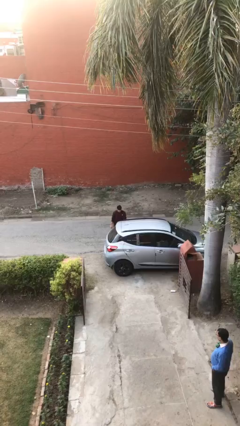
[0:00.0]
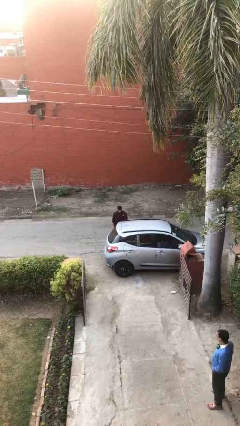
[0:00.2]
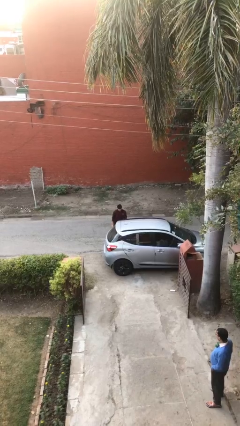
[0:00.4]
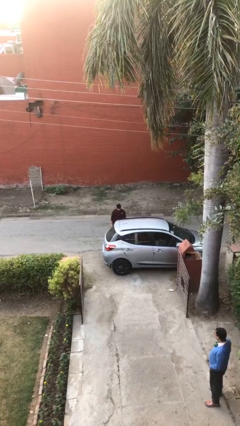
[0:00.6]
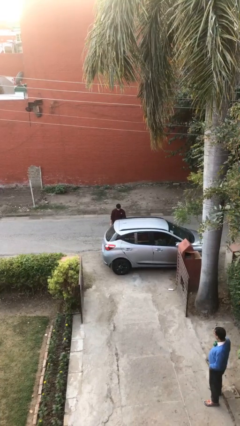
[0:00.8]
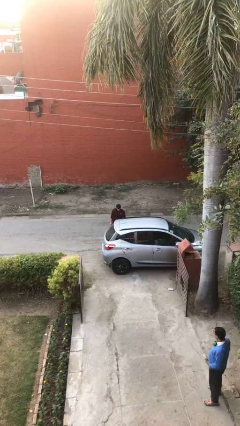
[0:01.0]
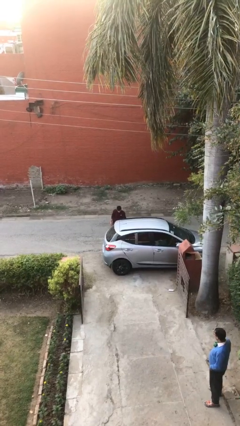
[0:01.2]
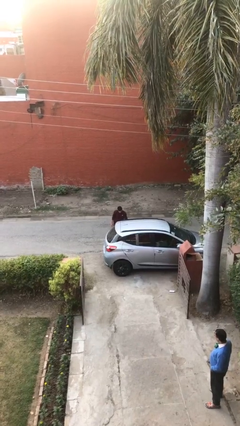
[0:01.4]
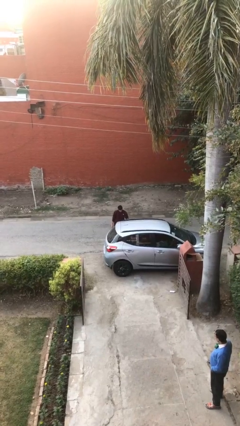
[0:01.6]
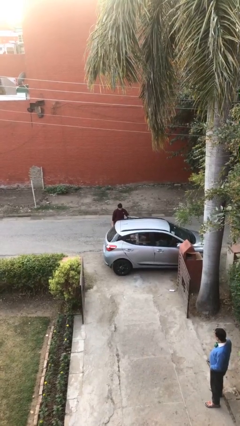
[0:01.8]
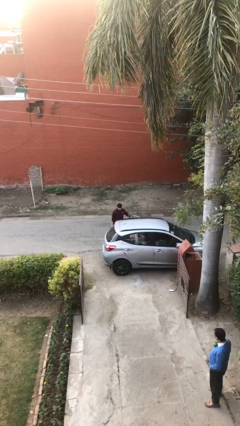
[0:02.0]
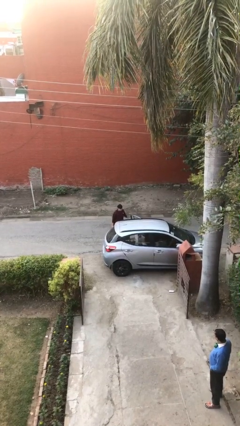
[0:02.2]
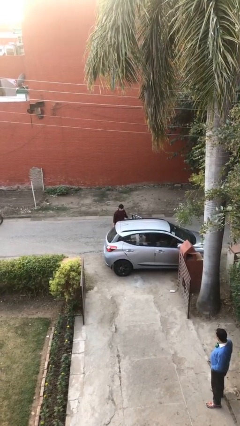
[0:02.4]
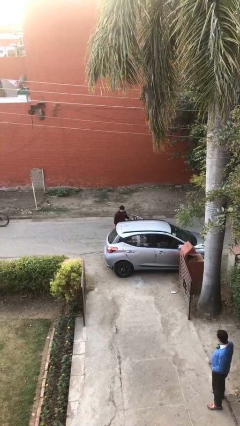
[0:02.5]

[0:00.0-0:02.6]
person opens car door

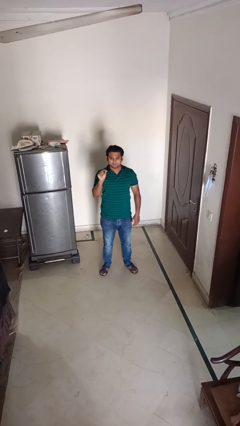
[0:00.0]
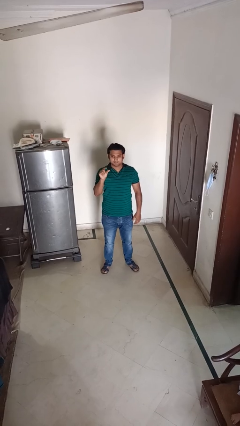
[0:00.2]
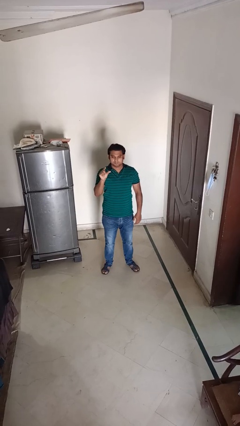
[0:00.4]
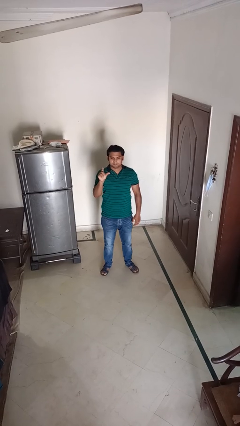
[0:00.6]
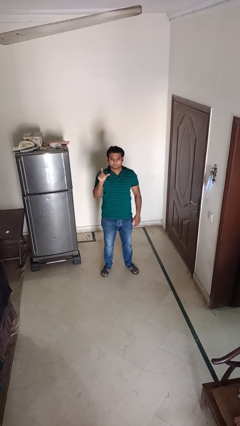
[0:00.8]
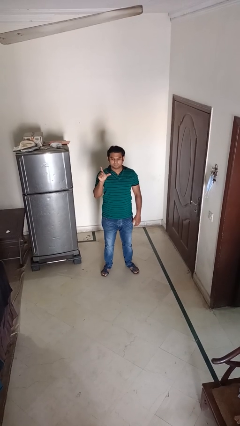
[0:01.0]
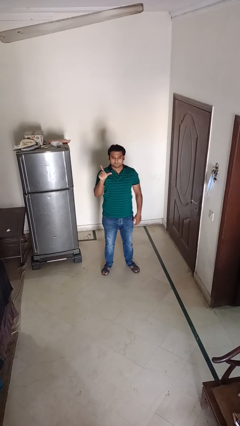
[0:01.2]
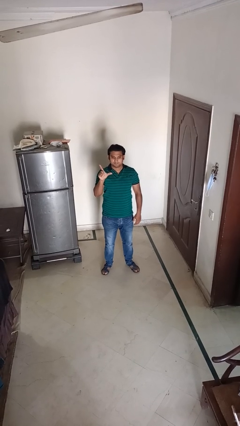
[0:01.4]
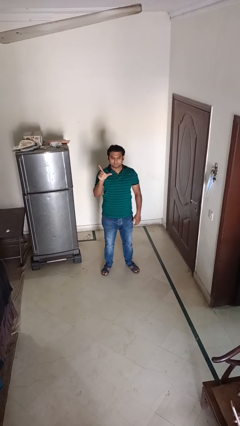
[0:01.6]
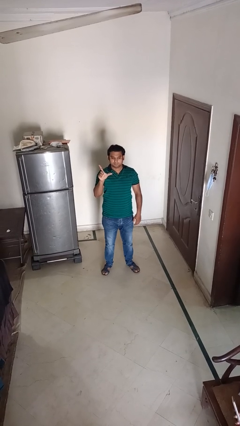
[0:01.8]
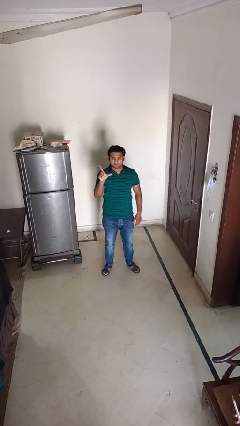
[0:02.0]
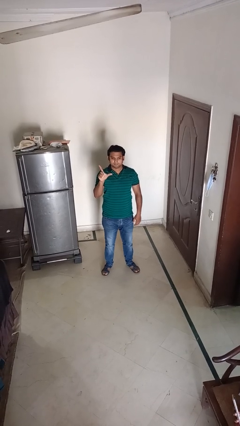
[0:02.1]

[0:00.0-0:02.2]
person gestures zoom out

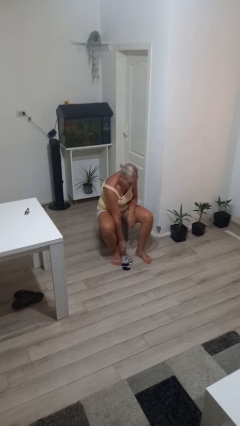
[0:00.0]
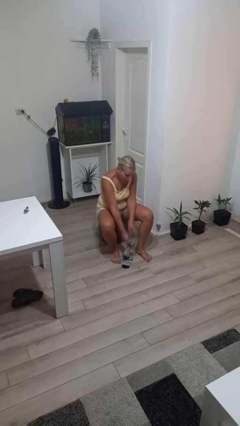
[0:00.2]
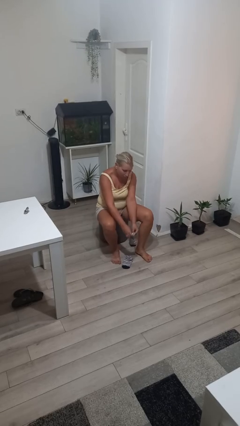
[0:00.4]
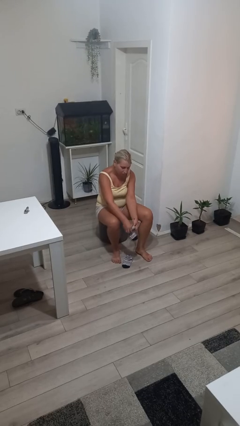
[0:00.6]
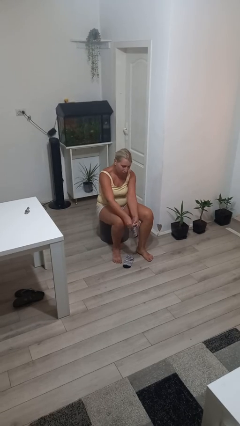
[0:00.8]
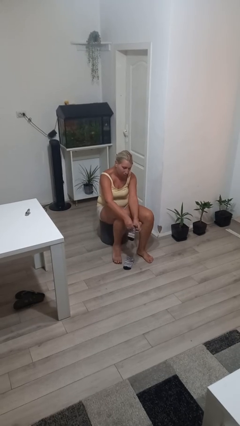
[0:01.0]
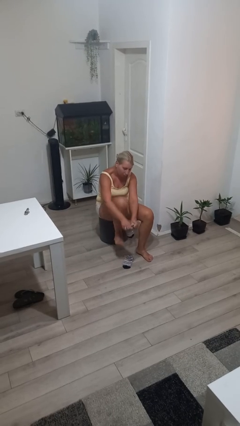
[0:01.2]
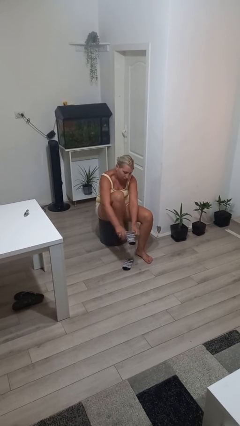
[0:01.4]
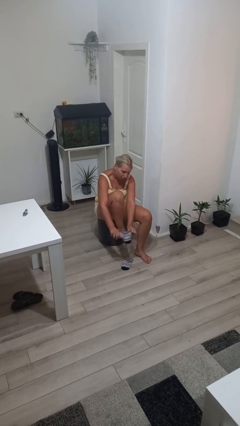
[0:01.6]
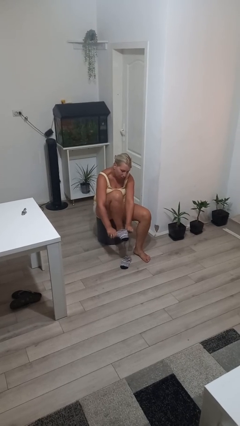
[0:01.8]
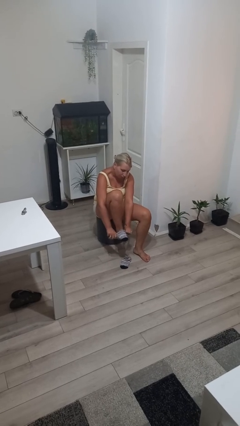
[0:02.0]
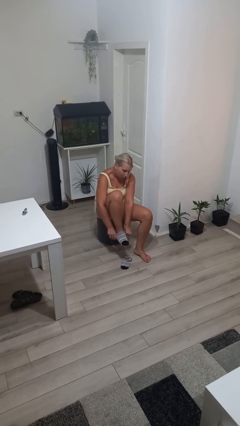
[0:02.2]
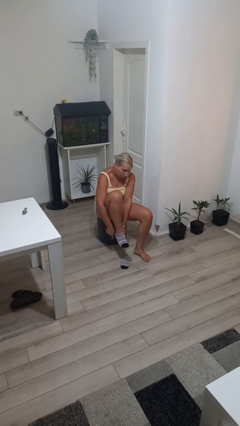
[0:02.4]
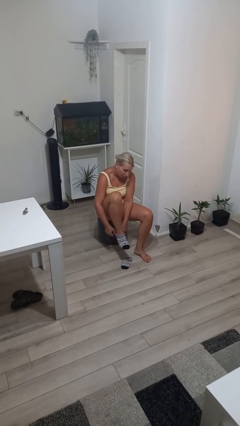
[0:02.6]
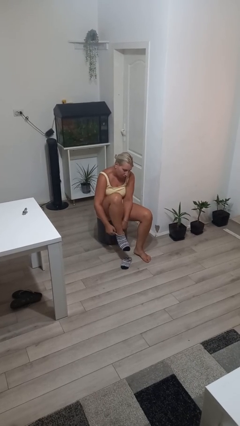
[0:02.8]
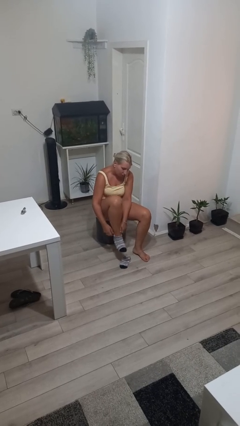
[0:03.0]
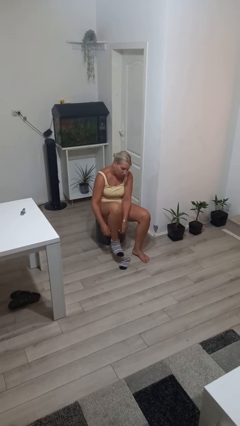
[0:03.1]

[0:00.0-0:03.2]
person puts on socks

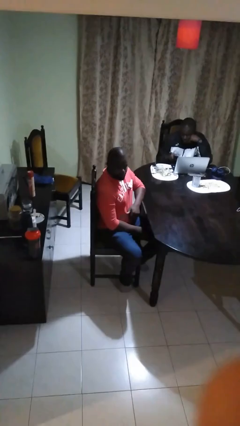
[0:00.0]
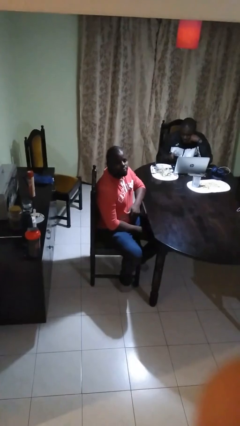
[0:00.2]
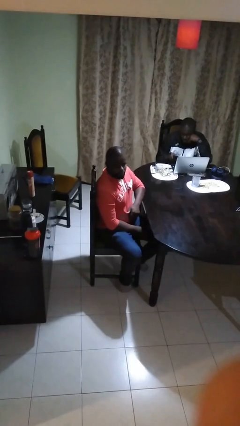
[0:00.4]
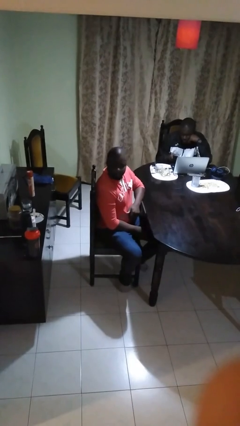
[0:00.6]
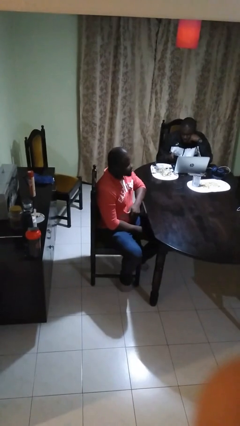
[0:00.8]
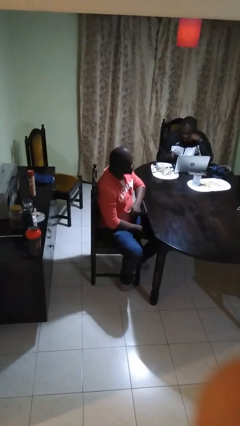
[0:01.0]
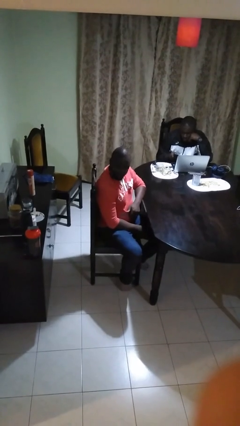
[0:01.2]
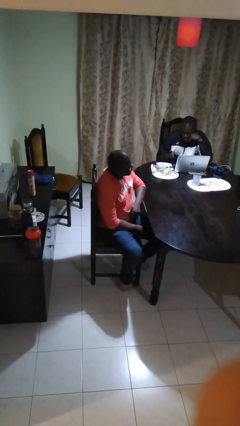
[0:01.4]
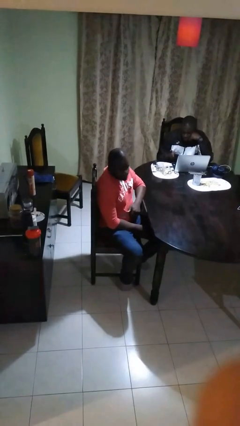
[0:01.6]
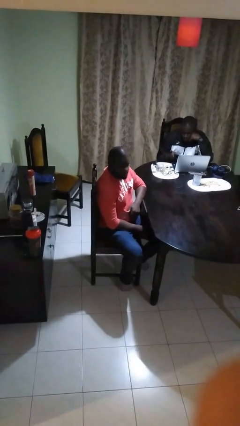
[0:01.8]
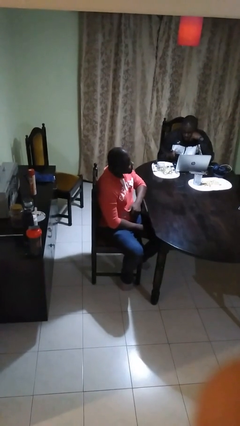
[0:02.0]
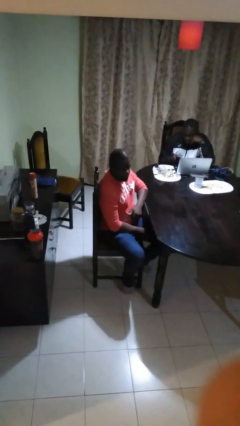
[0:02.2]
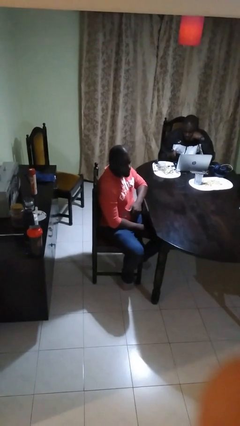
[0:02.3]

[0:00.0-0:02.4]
person shakes head

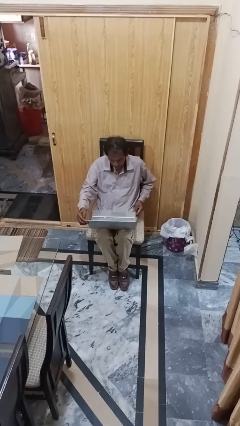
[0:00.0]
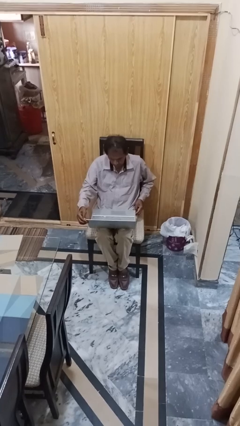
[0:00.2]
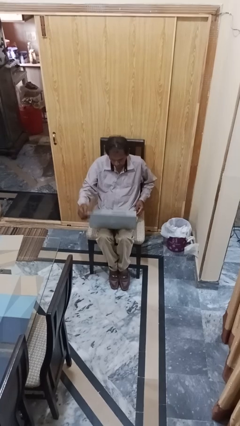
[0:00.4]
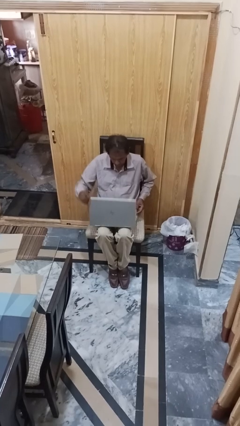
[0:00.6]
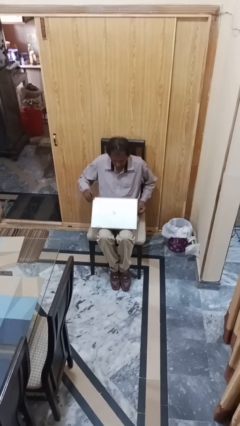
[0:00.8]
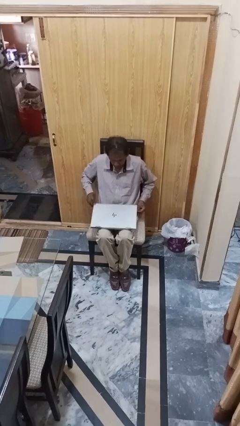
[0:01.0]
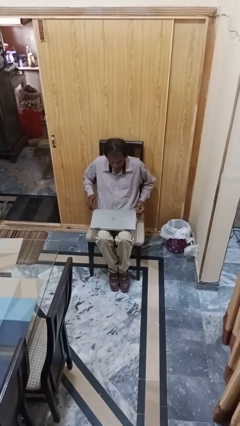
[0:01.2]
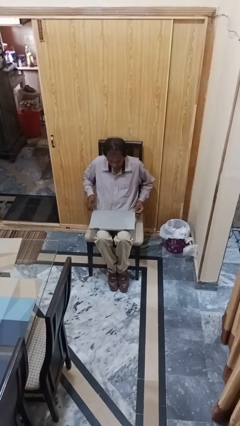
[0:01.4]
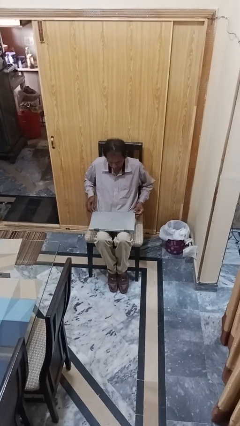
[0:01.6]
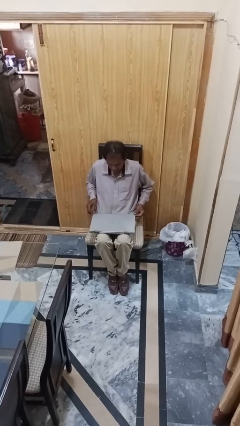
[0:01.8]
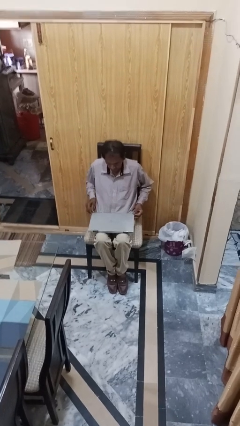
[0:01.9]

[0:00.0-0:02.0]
person closes laptop

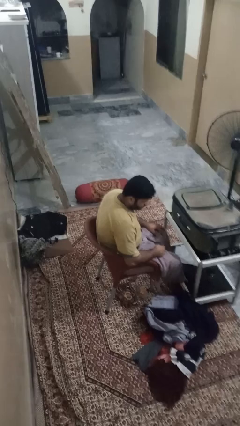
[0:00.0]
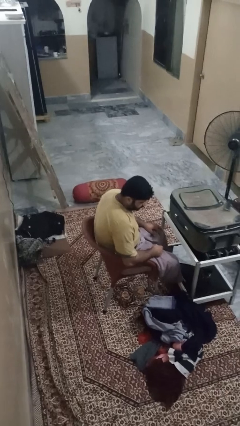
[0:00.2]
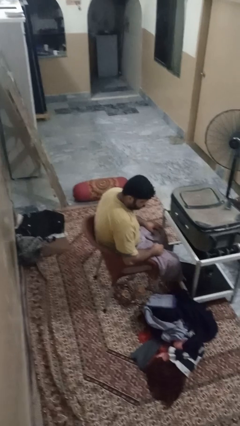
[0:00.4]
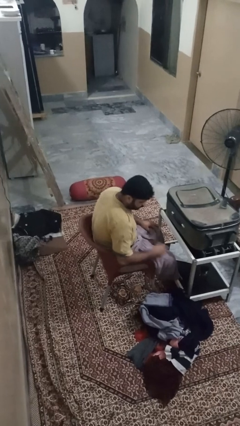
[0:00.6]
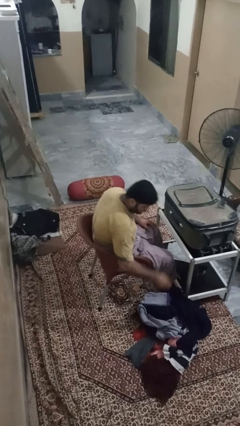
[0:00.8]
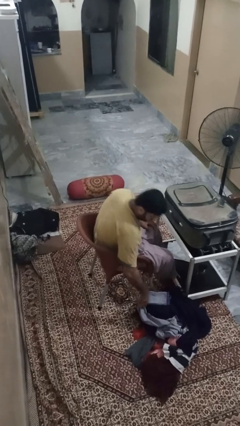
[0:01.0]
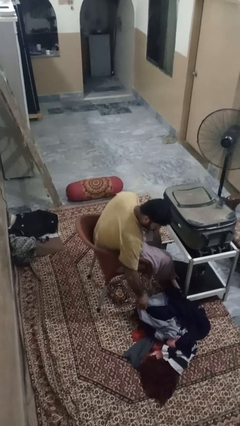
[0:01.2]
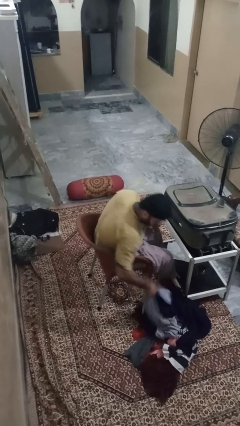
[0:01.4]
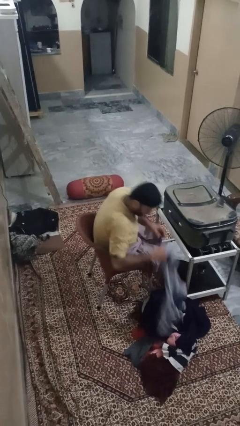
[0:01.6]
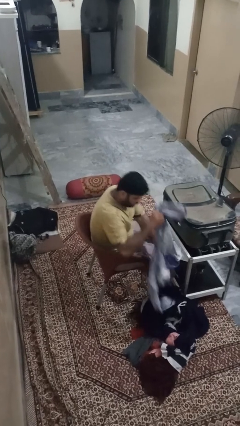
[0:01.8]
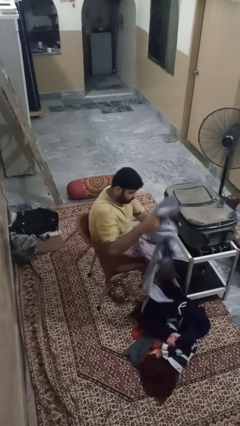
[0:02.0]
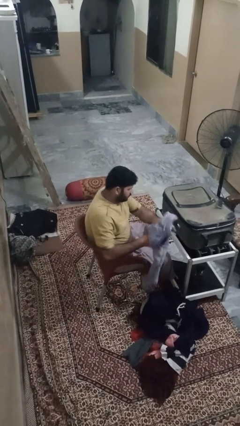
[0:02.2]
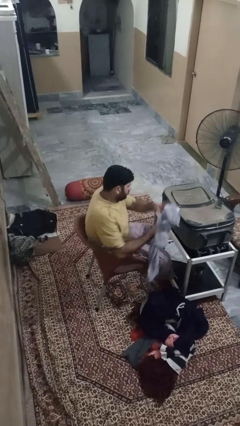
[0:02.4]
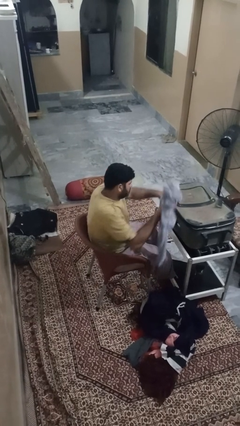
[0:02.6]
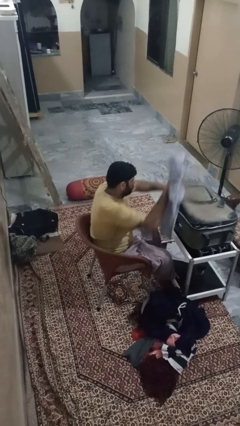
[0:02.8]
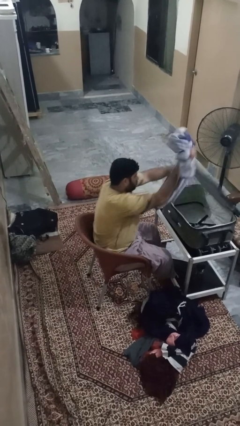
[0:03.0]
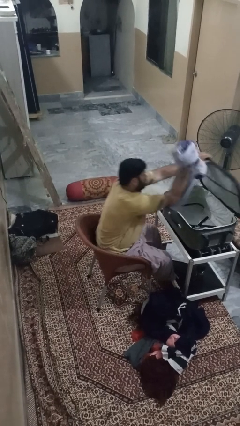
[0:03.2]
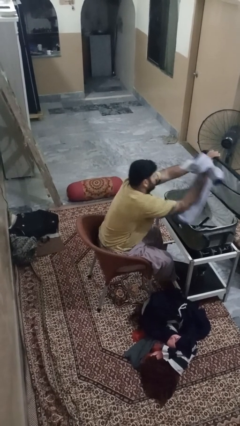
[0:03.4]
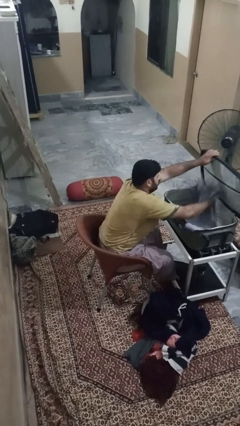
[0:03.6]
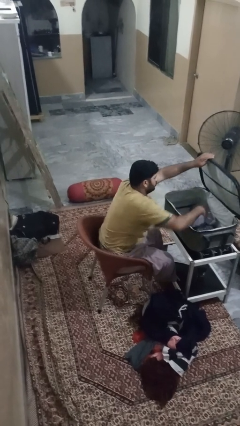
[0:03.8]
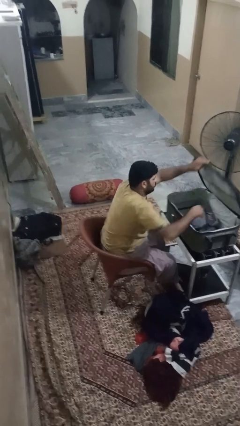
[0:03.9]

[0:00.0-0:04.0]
person loads clothes into suitcase

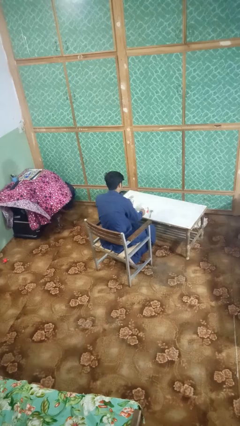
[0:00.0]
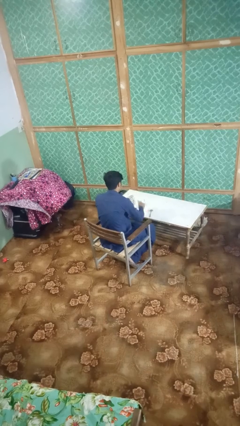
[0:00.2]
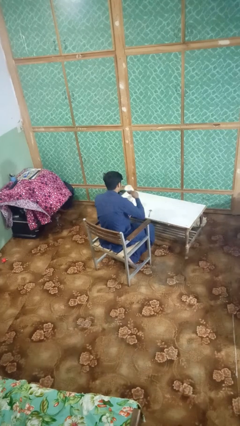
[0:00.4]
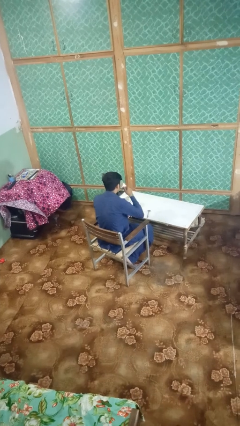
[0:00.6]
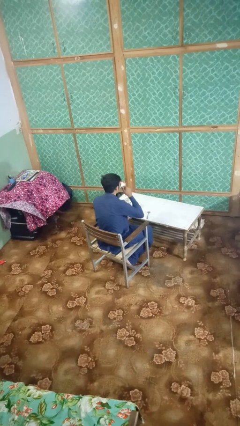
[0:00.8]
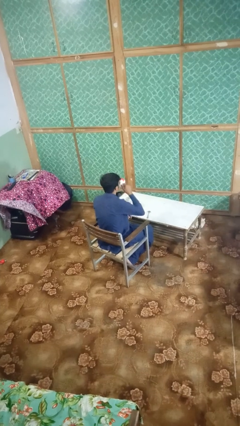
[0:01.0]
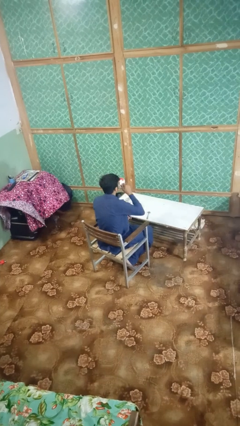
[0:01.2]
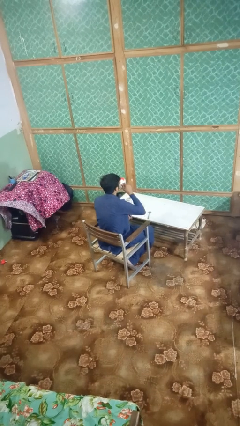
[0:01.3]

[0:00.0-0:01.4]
person drinks from mug
